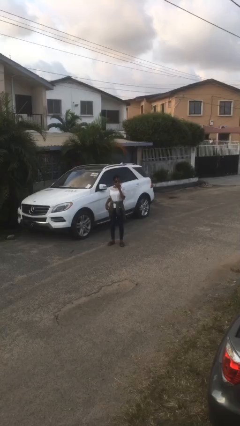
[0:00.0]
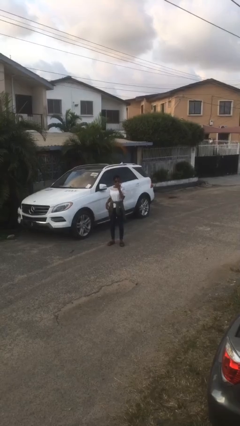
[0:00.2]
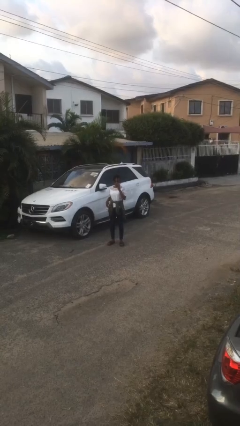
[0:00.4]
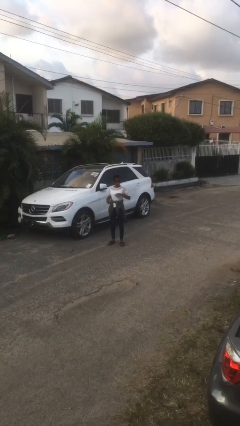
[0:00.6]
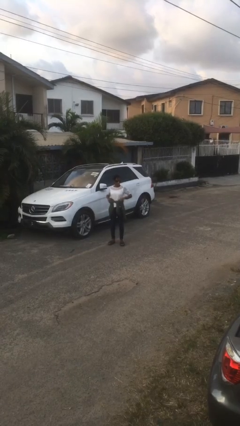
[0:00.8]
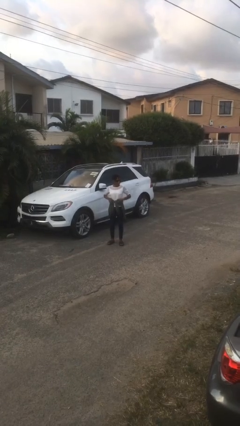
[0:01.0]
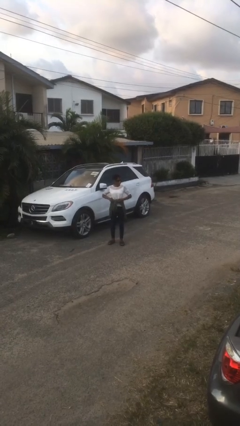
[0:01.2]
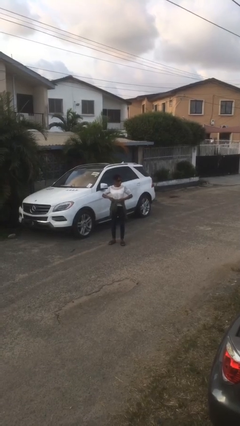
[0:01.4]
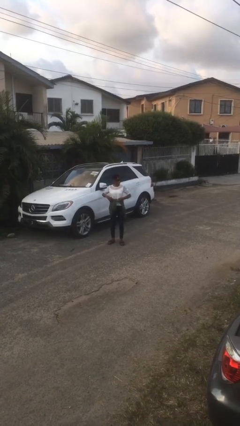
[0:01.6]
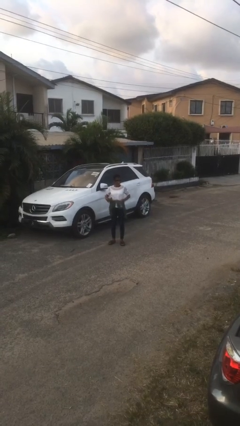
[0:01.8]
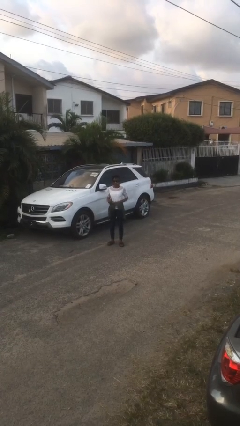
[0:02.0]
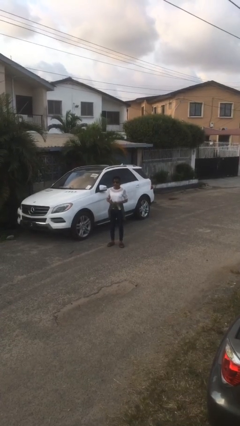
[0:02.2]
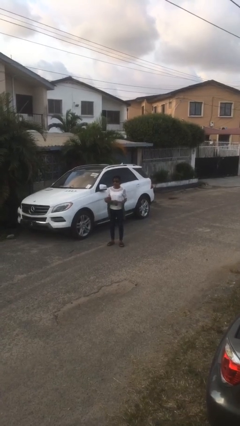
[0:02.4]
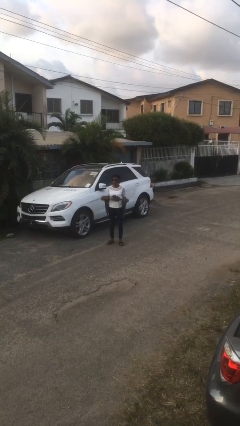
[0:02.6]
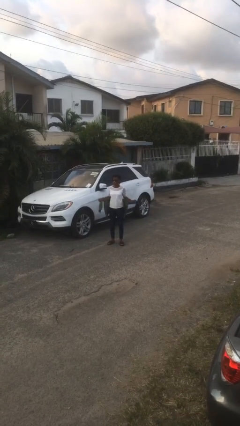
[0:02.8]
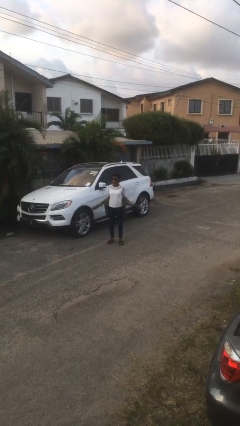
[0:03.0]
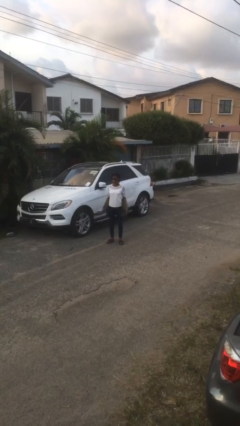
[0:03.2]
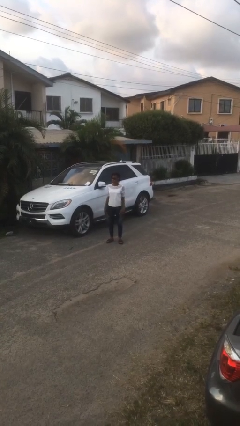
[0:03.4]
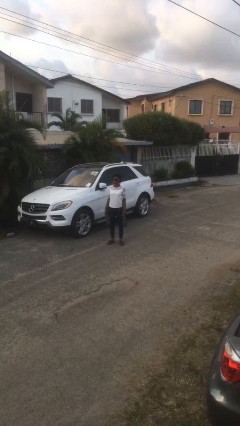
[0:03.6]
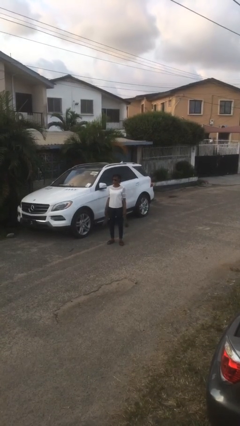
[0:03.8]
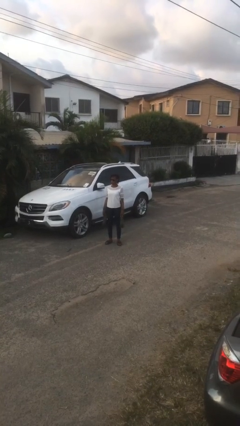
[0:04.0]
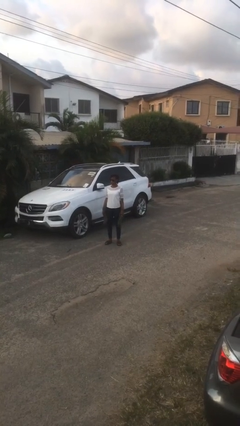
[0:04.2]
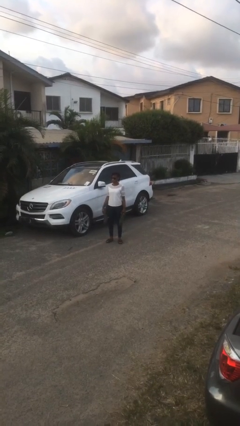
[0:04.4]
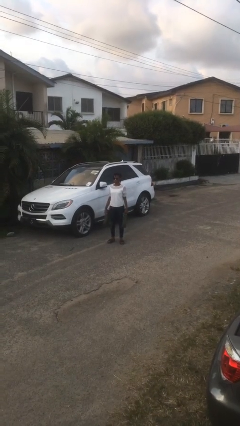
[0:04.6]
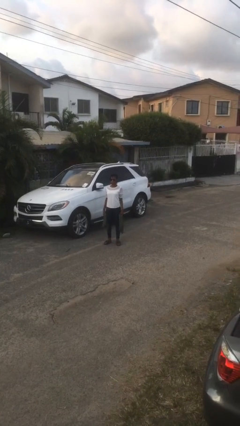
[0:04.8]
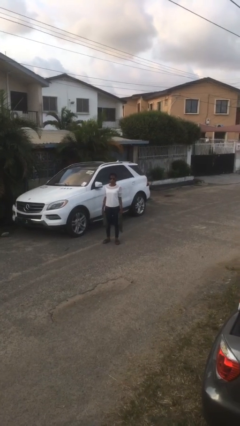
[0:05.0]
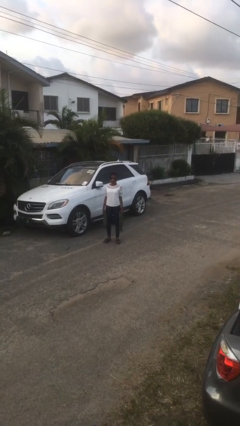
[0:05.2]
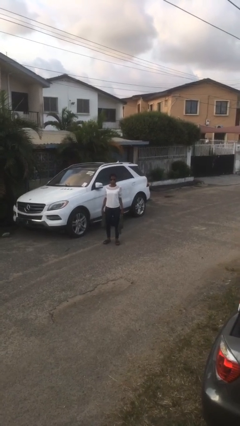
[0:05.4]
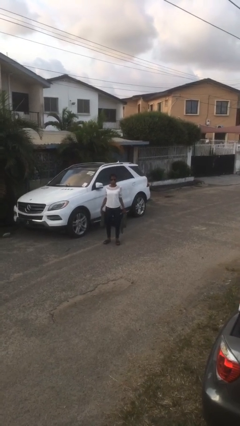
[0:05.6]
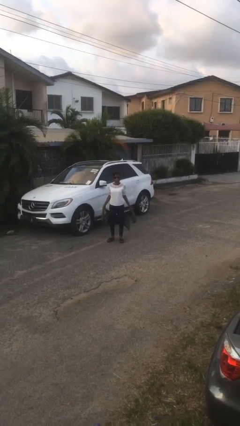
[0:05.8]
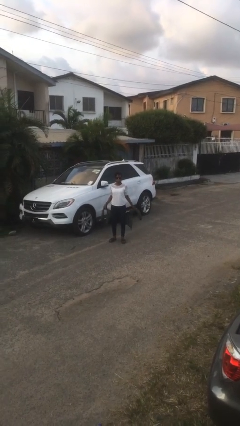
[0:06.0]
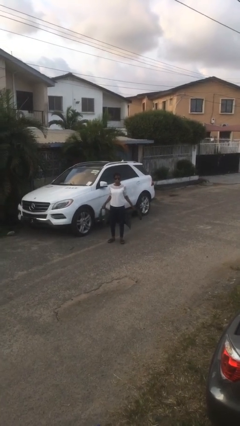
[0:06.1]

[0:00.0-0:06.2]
person unties jacket around waist

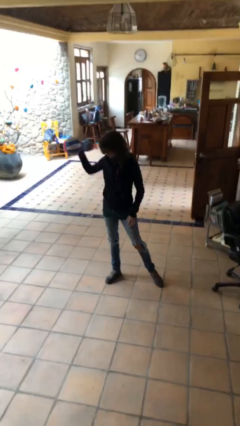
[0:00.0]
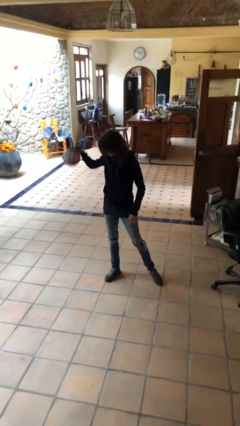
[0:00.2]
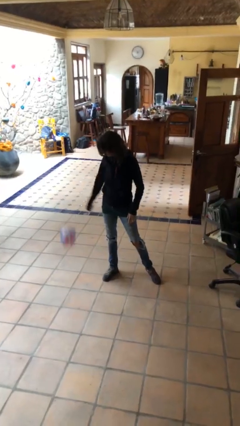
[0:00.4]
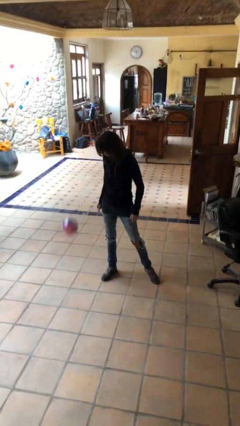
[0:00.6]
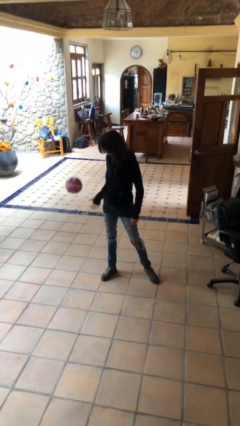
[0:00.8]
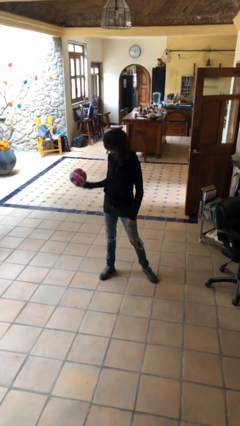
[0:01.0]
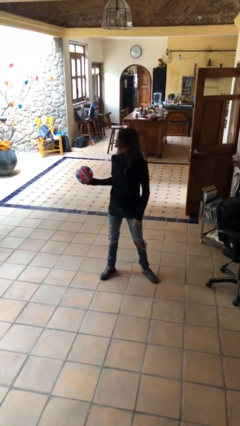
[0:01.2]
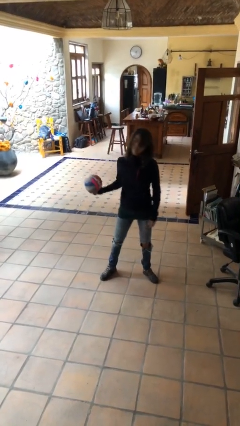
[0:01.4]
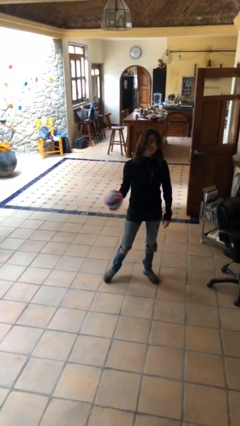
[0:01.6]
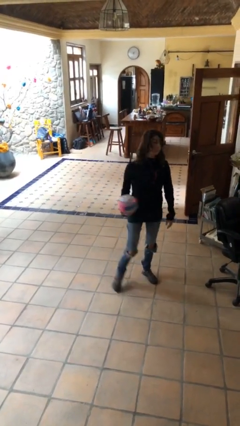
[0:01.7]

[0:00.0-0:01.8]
person bounces ball on floor

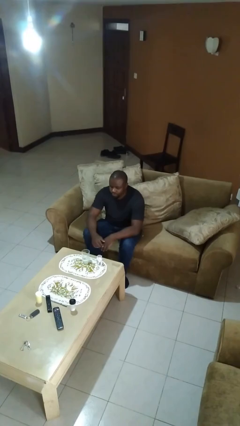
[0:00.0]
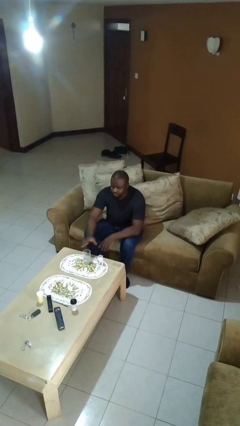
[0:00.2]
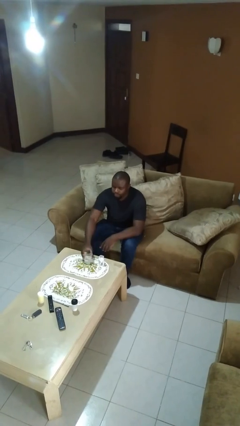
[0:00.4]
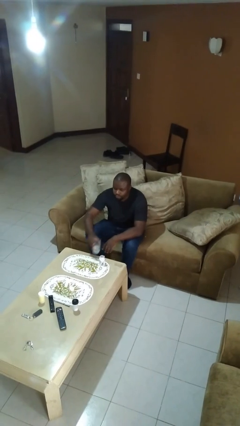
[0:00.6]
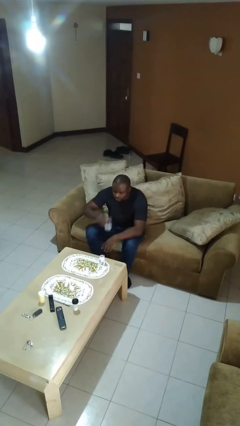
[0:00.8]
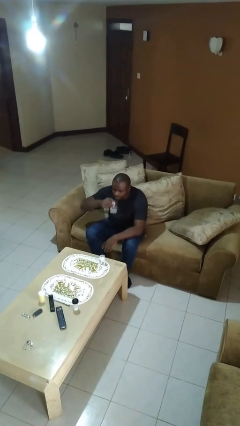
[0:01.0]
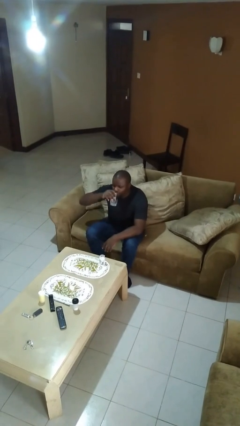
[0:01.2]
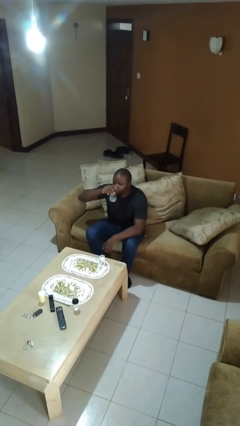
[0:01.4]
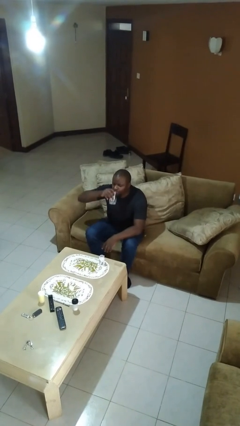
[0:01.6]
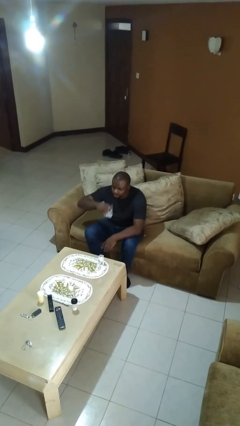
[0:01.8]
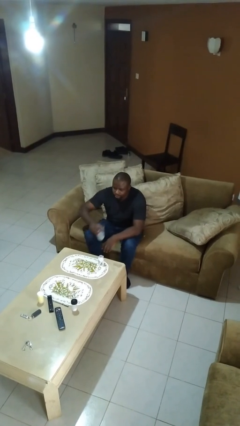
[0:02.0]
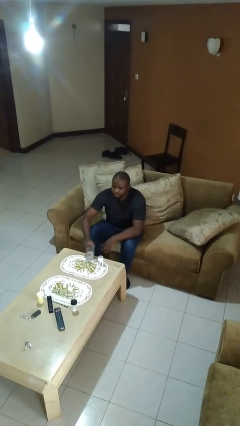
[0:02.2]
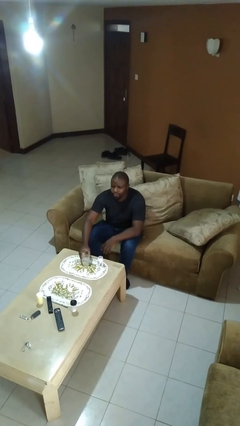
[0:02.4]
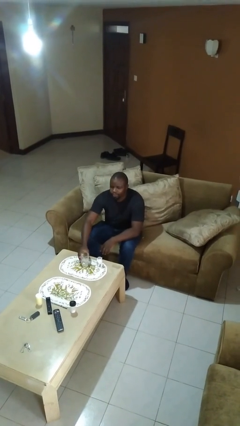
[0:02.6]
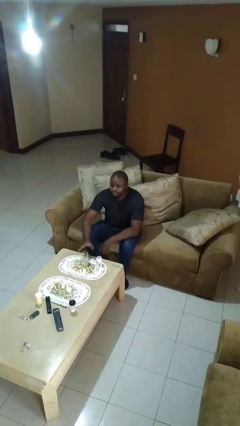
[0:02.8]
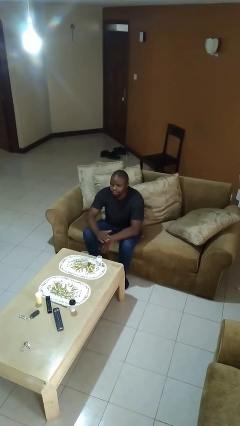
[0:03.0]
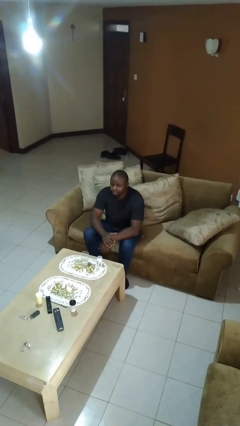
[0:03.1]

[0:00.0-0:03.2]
person drinks from cup

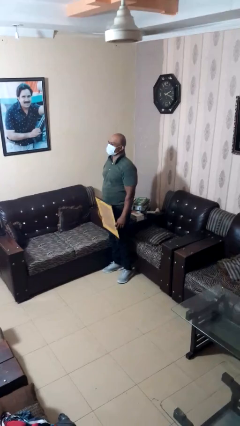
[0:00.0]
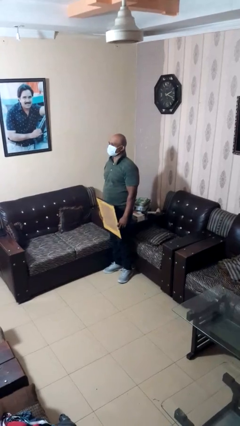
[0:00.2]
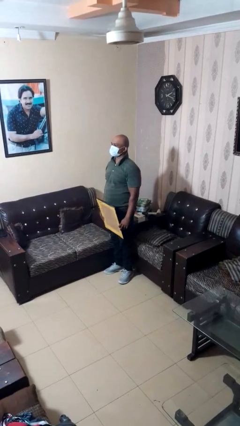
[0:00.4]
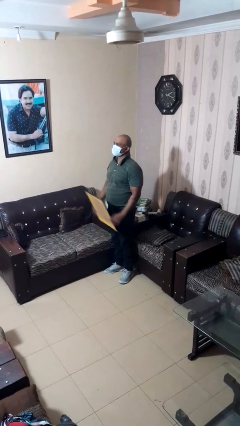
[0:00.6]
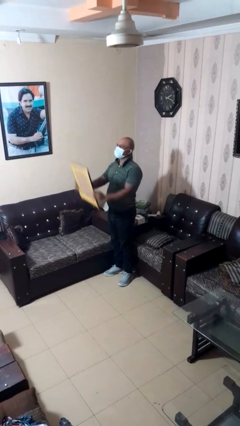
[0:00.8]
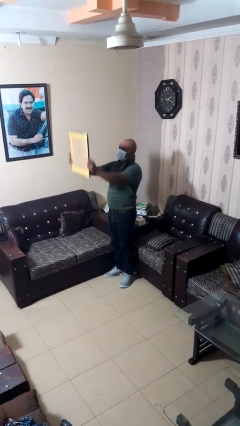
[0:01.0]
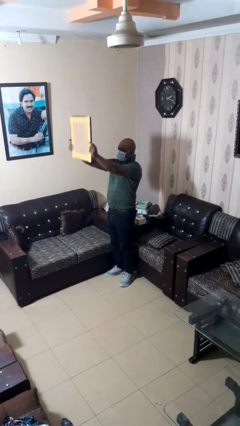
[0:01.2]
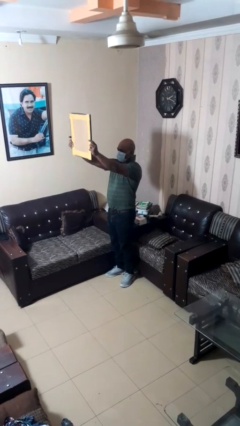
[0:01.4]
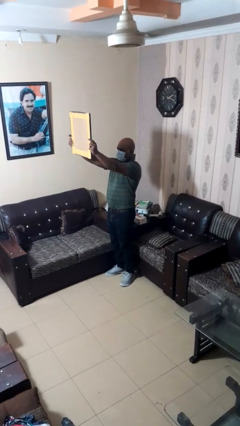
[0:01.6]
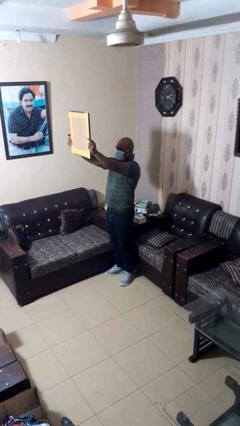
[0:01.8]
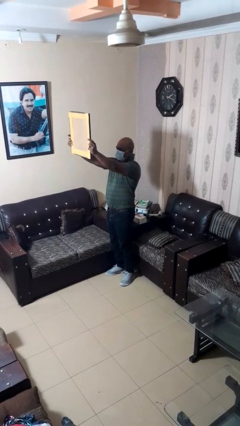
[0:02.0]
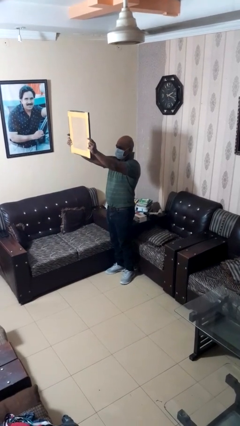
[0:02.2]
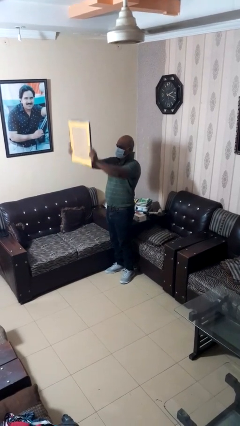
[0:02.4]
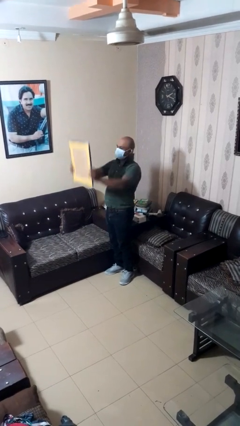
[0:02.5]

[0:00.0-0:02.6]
person holds object above head

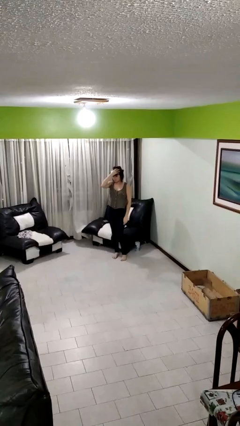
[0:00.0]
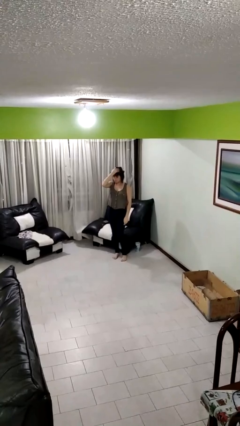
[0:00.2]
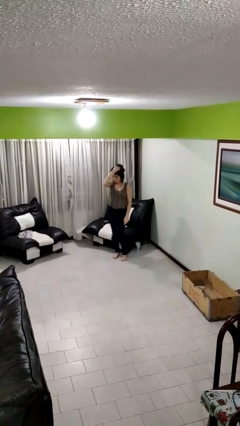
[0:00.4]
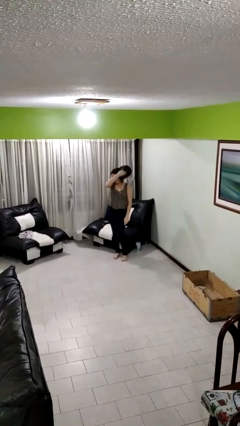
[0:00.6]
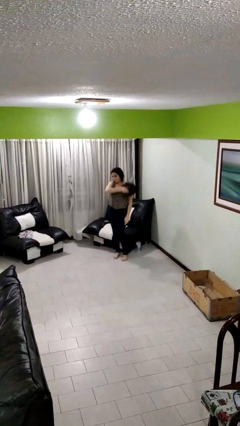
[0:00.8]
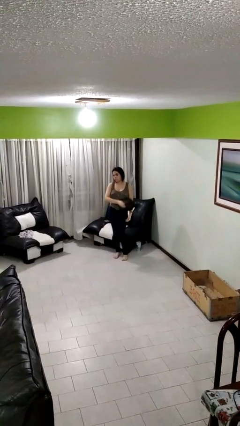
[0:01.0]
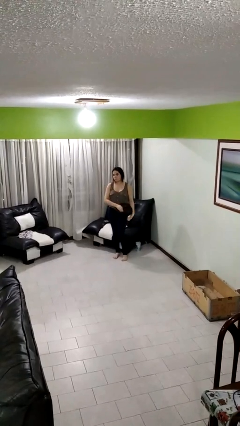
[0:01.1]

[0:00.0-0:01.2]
person takes off hat

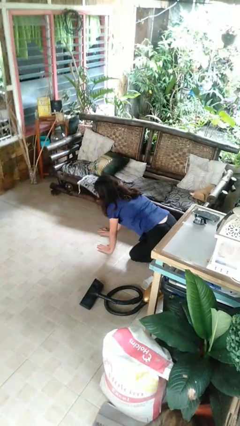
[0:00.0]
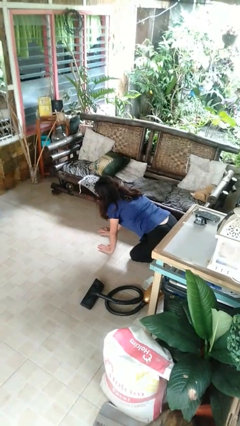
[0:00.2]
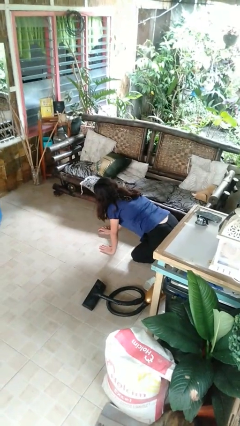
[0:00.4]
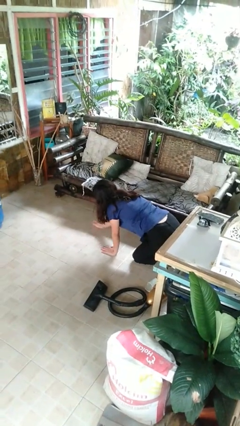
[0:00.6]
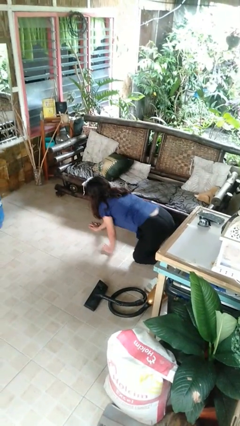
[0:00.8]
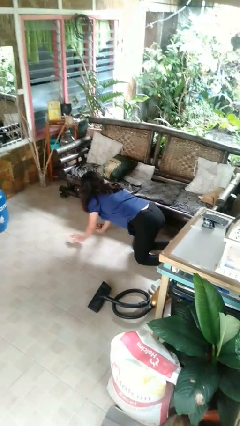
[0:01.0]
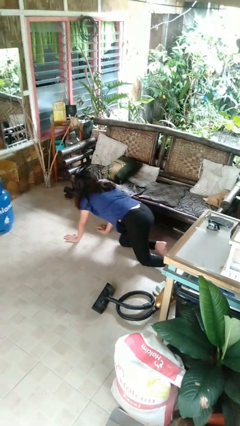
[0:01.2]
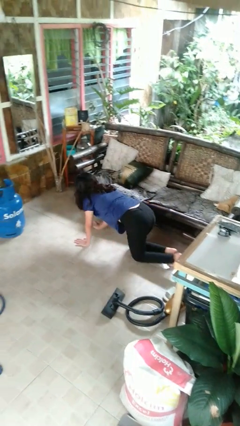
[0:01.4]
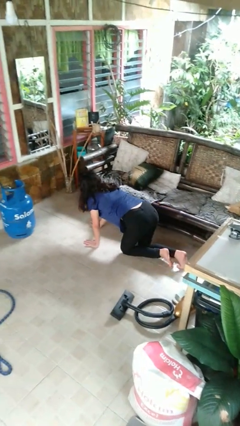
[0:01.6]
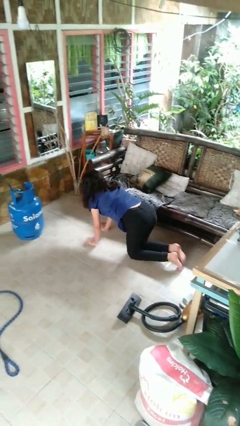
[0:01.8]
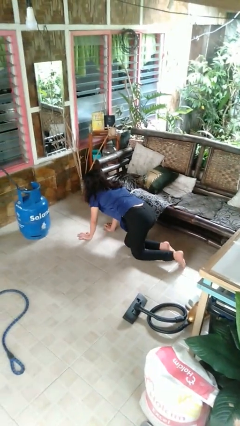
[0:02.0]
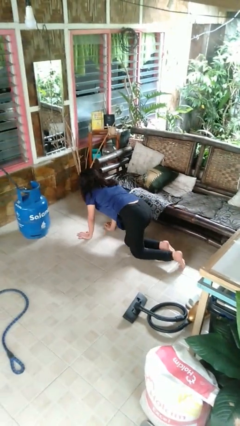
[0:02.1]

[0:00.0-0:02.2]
person crawls

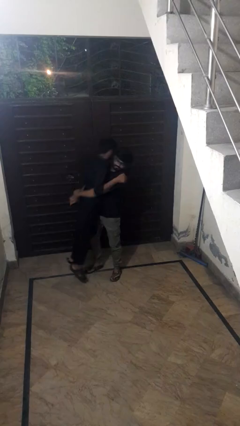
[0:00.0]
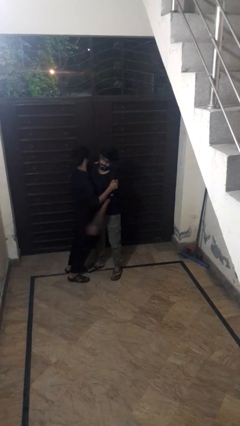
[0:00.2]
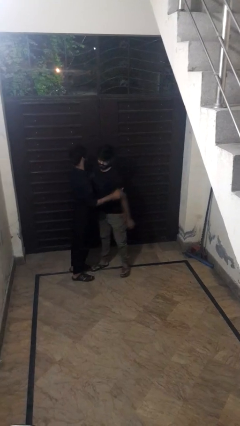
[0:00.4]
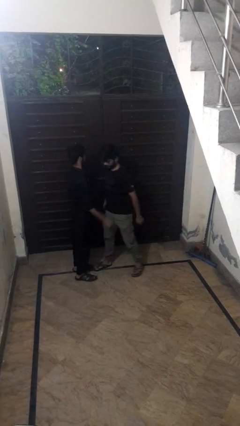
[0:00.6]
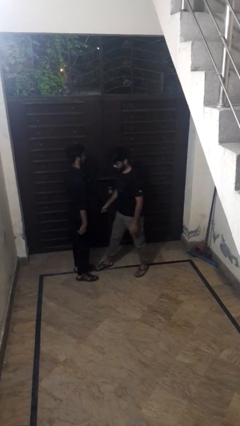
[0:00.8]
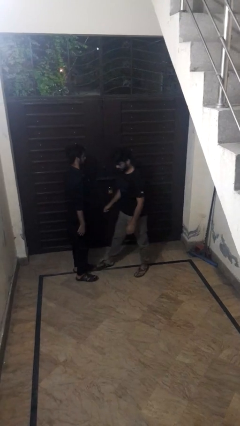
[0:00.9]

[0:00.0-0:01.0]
person puts down person
